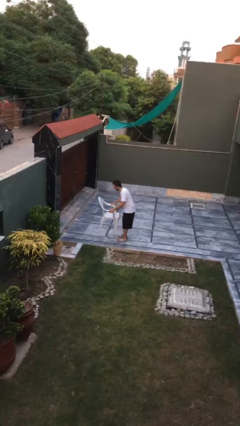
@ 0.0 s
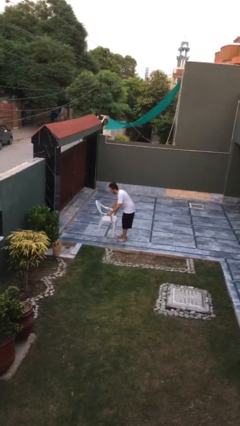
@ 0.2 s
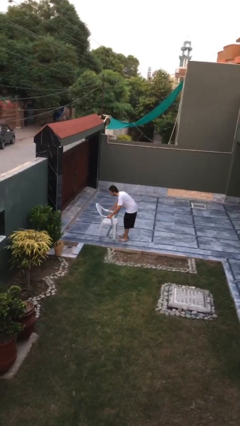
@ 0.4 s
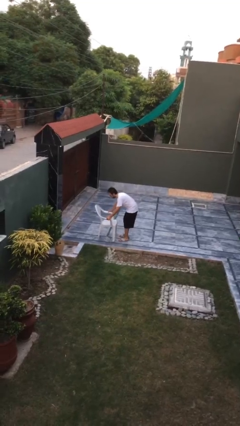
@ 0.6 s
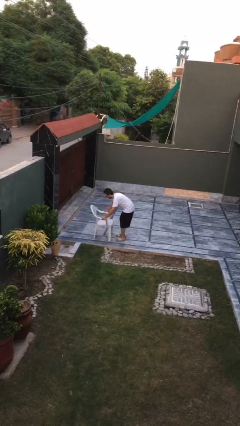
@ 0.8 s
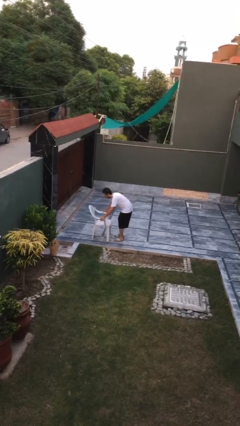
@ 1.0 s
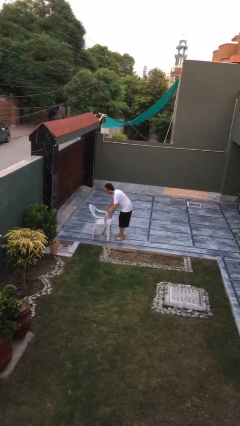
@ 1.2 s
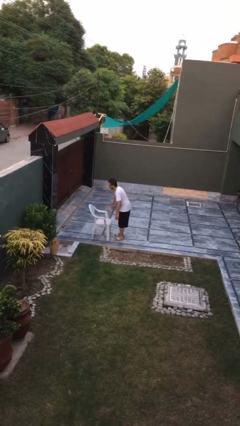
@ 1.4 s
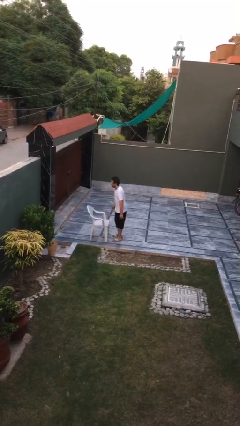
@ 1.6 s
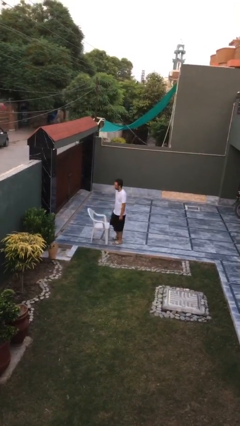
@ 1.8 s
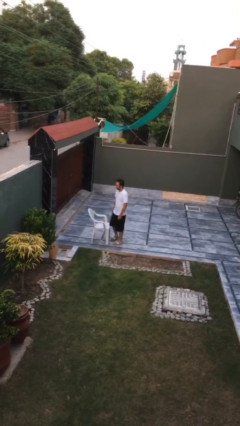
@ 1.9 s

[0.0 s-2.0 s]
person puts down object on floor

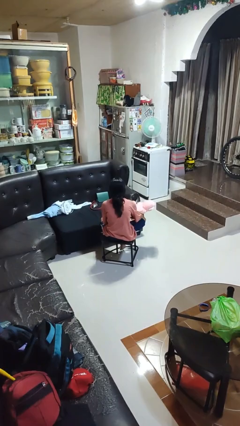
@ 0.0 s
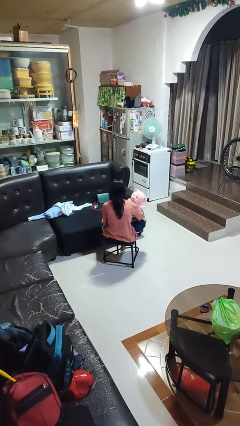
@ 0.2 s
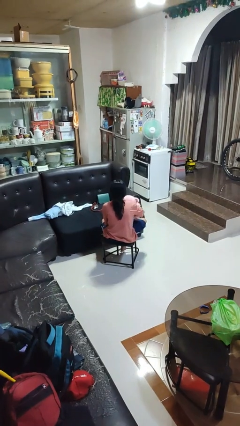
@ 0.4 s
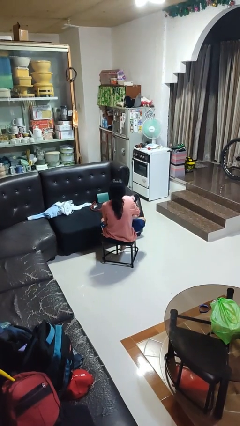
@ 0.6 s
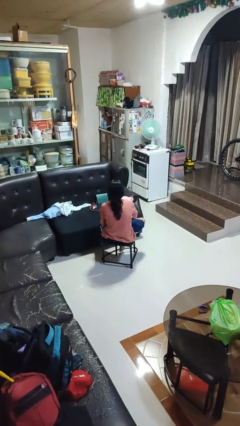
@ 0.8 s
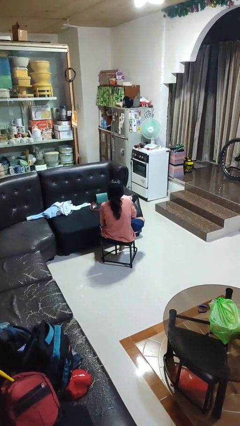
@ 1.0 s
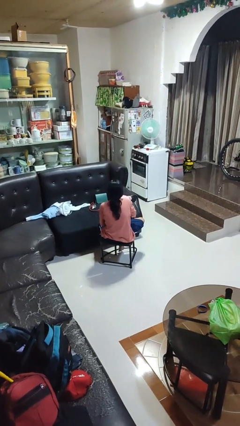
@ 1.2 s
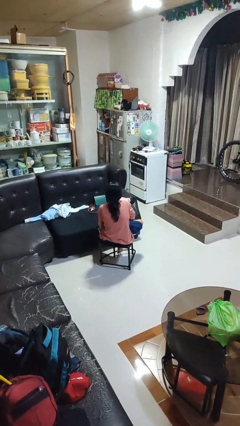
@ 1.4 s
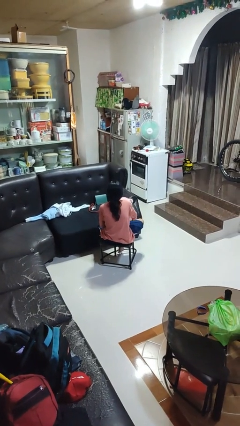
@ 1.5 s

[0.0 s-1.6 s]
person hugs stuffed animal

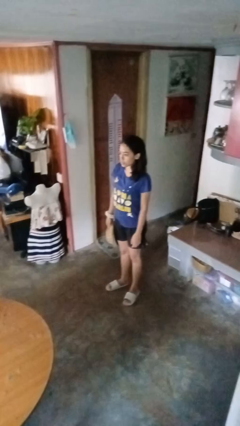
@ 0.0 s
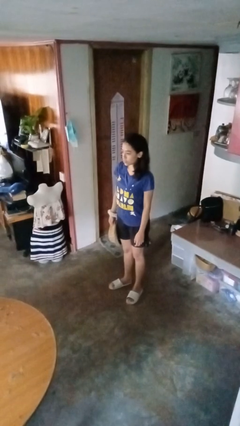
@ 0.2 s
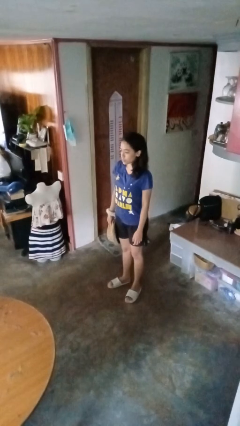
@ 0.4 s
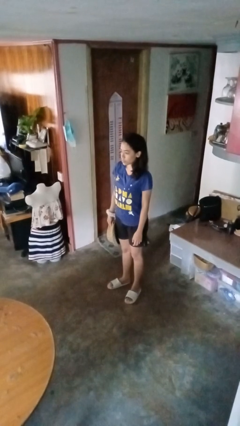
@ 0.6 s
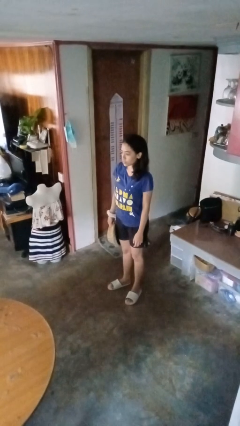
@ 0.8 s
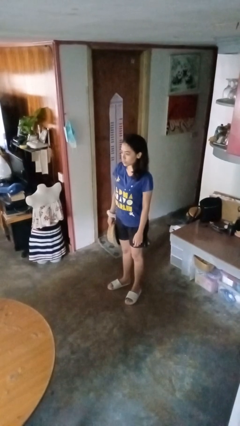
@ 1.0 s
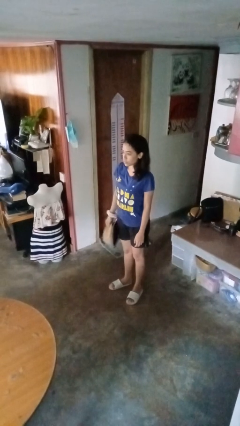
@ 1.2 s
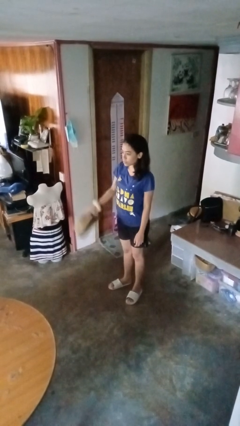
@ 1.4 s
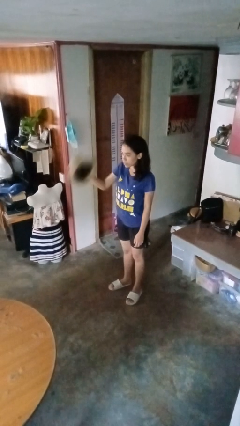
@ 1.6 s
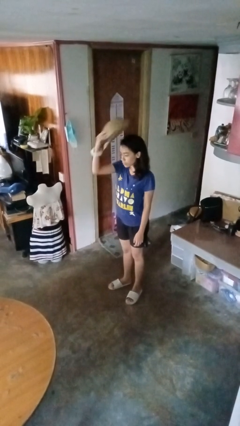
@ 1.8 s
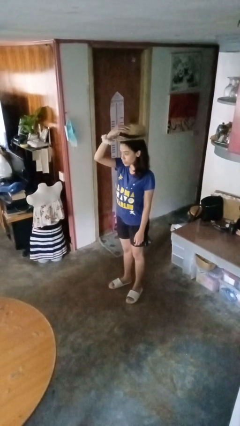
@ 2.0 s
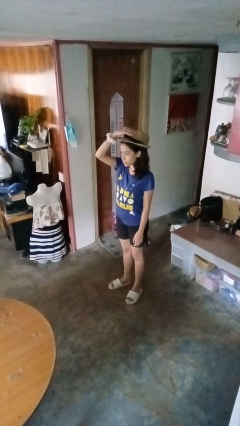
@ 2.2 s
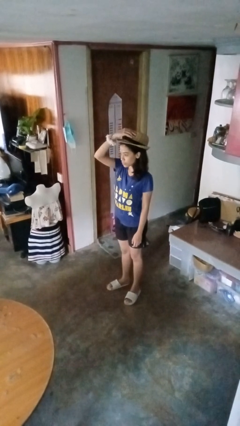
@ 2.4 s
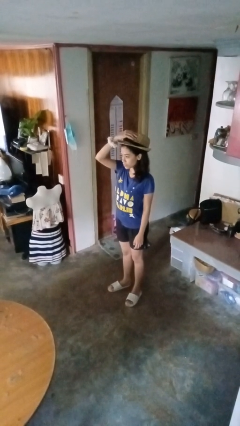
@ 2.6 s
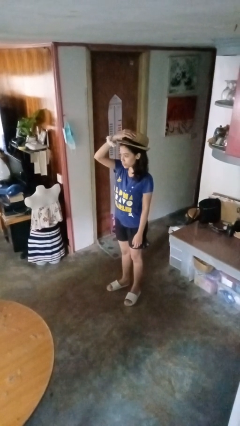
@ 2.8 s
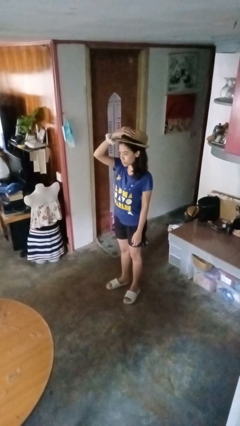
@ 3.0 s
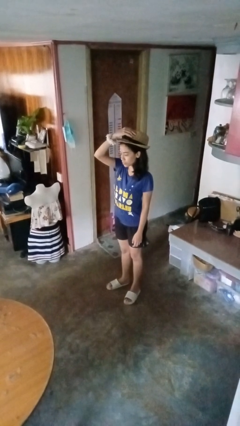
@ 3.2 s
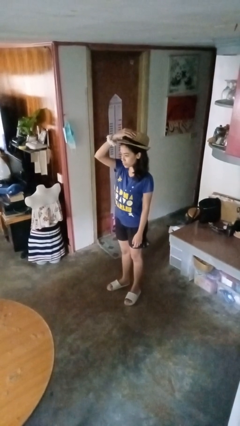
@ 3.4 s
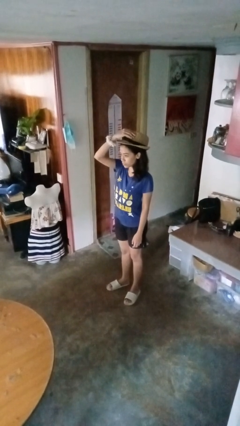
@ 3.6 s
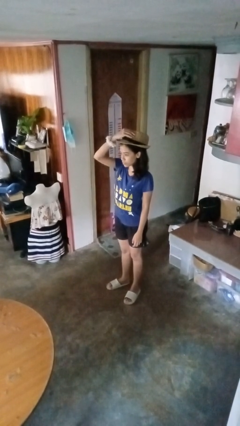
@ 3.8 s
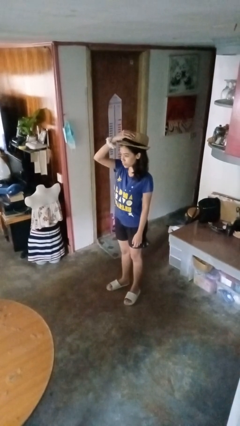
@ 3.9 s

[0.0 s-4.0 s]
person puts on hat

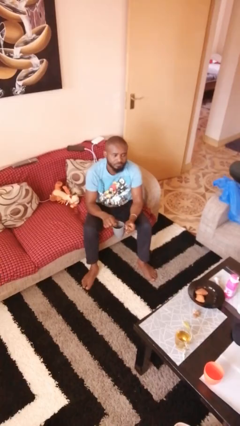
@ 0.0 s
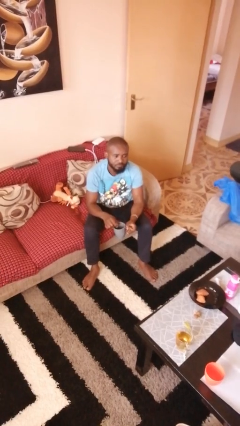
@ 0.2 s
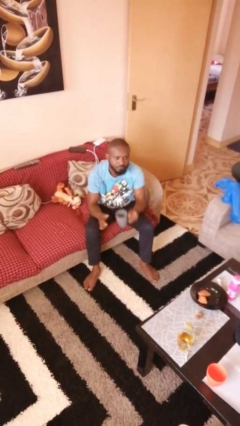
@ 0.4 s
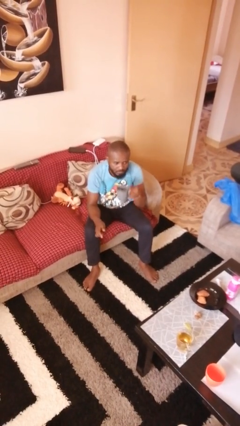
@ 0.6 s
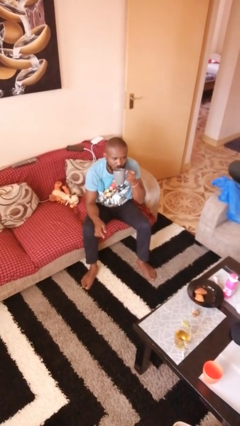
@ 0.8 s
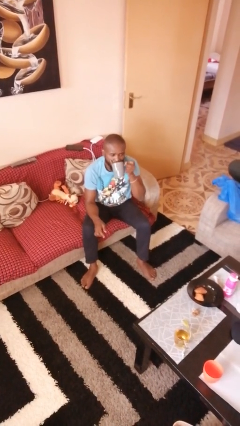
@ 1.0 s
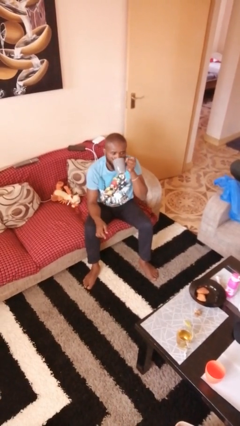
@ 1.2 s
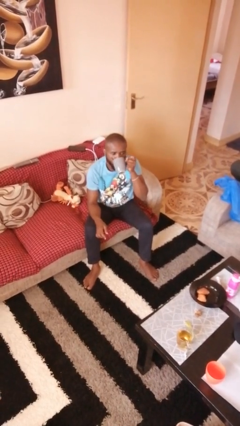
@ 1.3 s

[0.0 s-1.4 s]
person drinks from mug

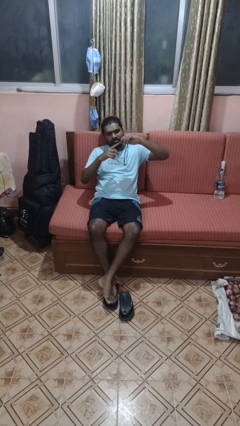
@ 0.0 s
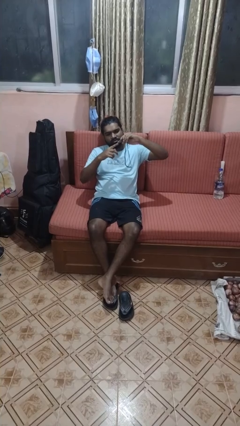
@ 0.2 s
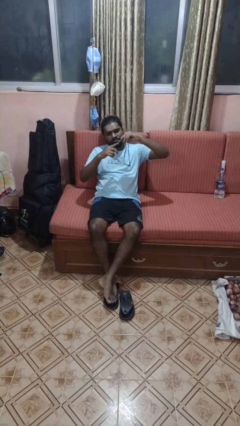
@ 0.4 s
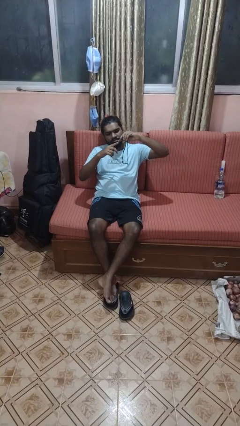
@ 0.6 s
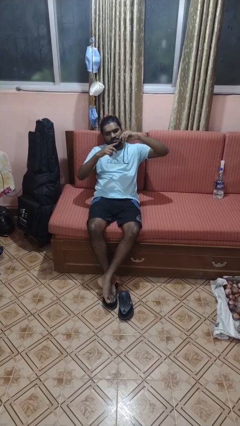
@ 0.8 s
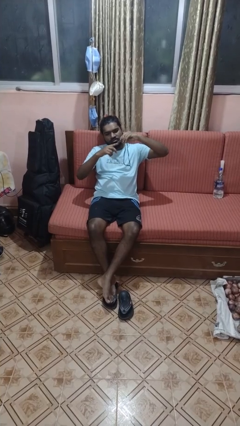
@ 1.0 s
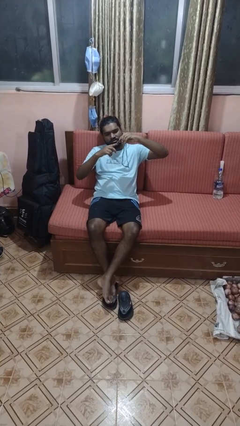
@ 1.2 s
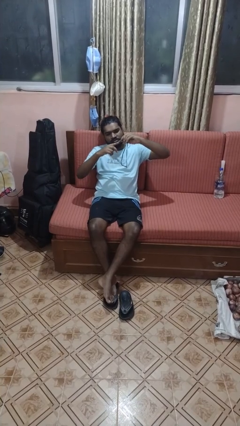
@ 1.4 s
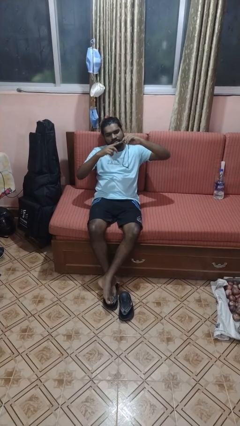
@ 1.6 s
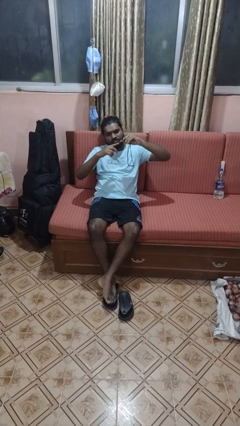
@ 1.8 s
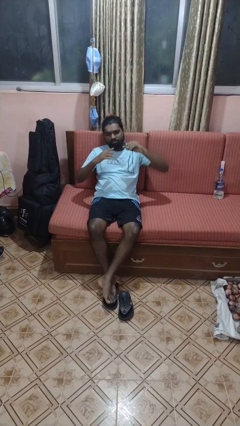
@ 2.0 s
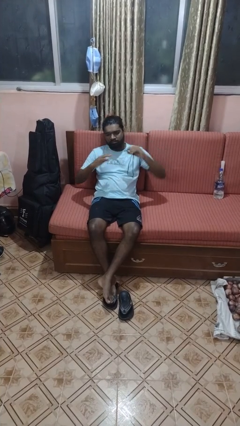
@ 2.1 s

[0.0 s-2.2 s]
person clips fingernails

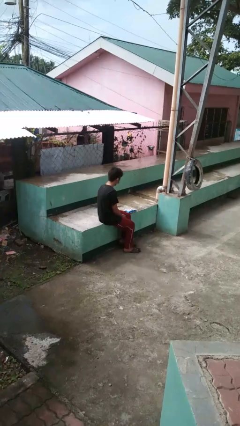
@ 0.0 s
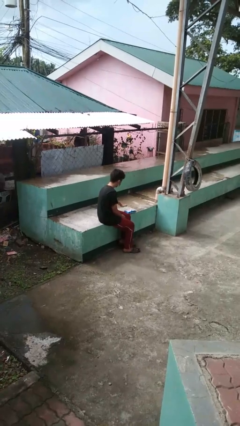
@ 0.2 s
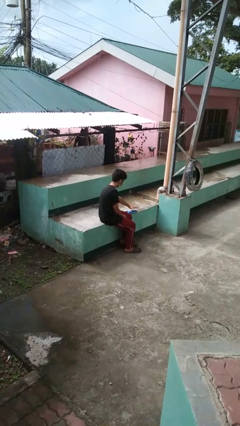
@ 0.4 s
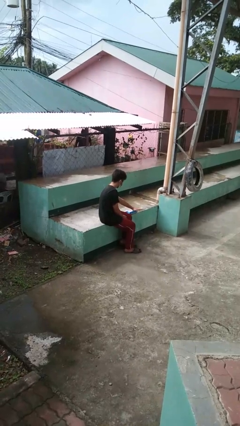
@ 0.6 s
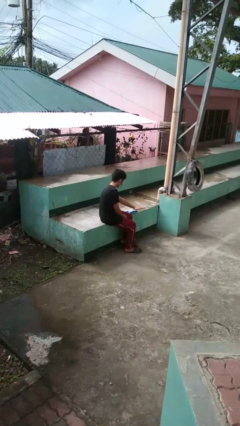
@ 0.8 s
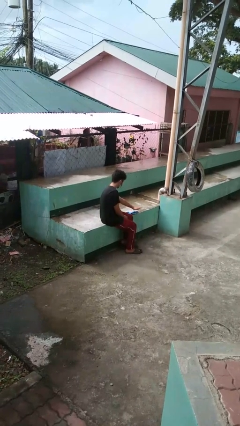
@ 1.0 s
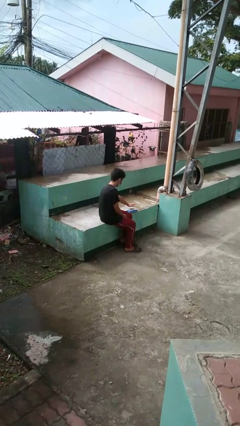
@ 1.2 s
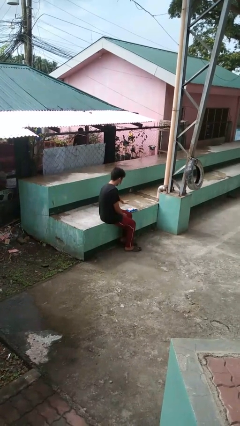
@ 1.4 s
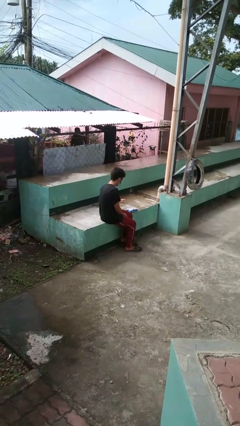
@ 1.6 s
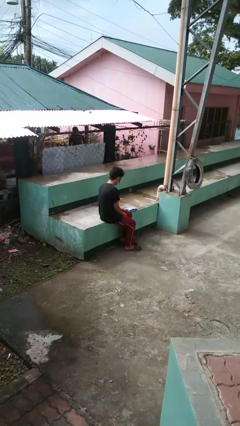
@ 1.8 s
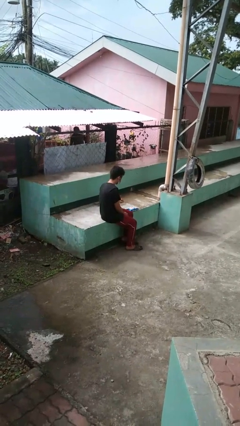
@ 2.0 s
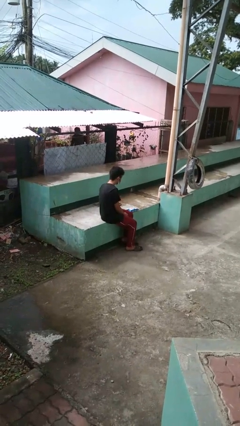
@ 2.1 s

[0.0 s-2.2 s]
person waves hand over object

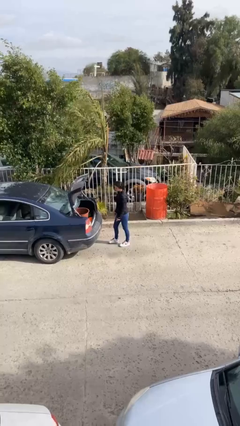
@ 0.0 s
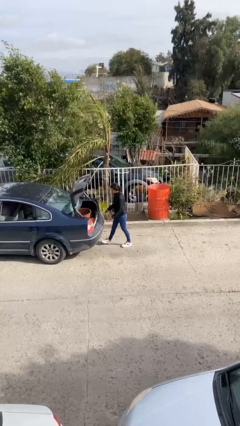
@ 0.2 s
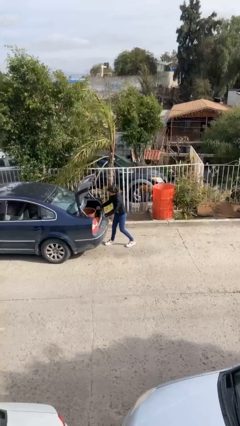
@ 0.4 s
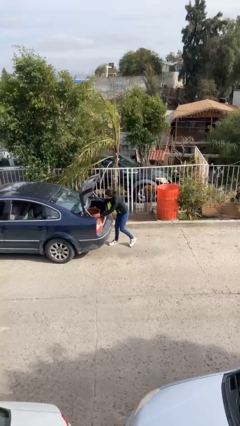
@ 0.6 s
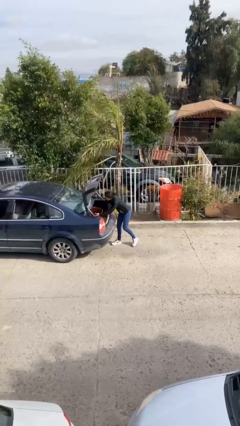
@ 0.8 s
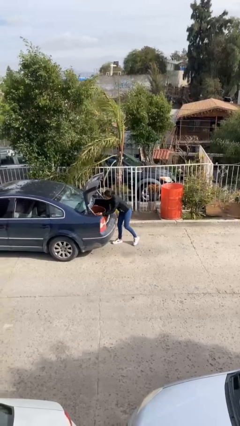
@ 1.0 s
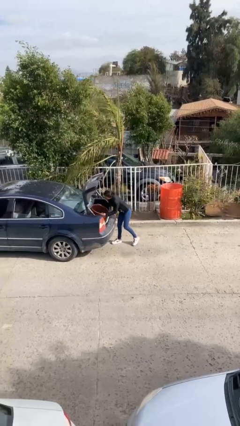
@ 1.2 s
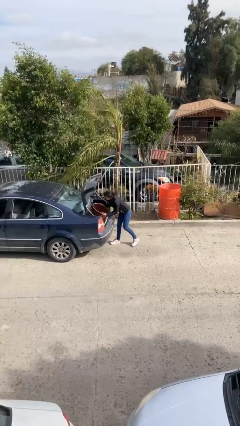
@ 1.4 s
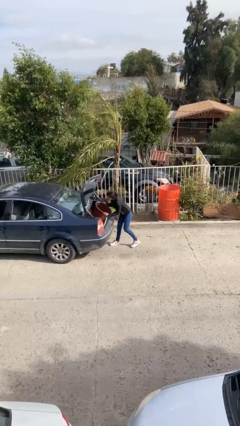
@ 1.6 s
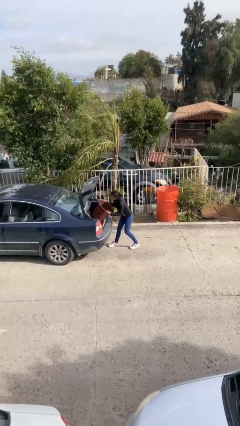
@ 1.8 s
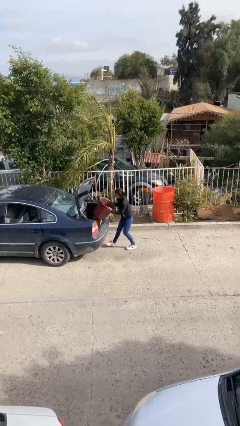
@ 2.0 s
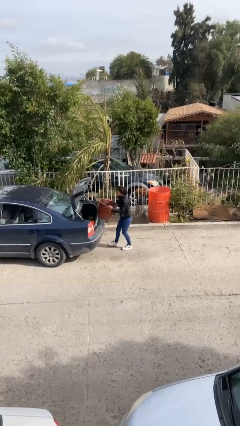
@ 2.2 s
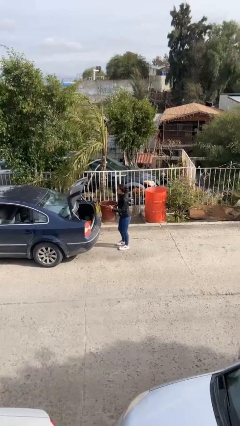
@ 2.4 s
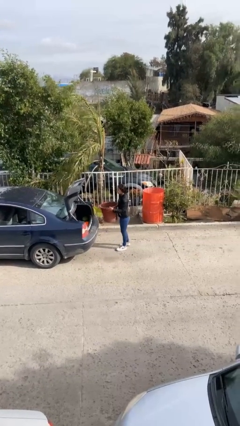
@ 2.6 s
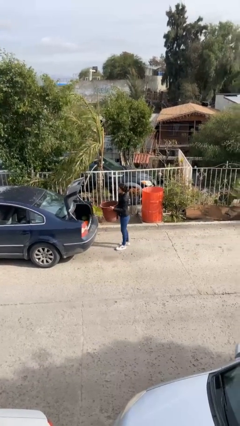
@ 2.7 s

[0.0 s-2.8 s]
person unloads car

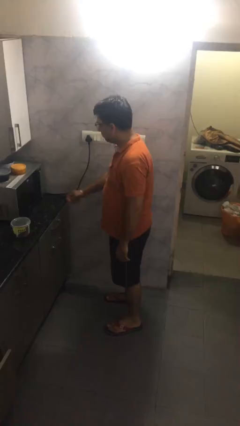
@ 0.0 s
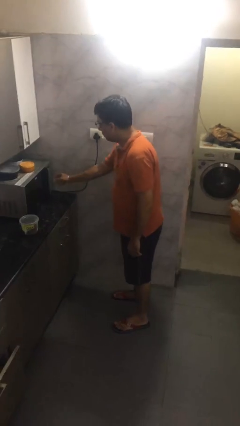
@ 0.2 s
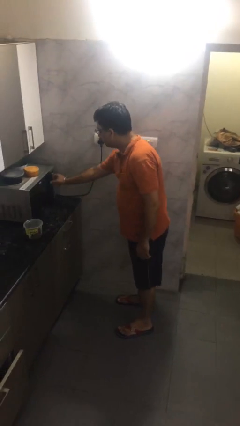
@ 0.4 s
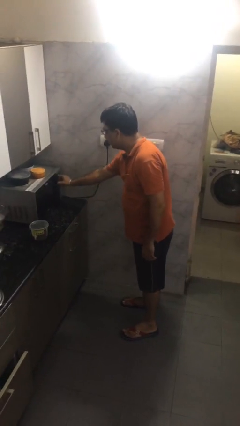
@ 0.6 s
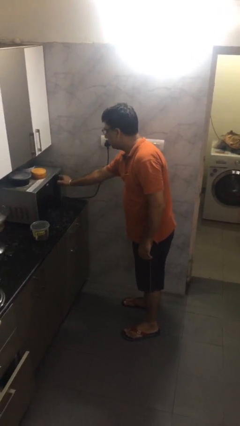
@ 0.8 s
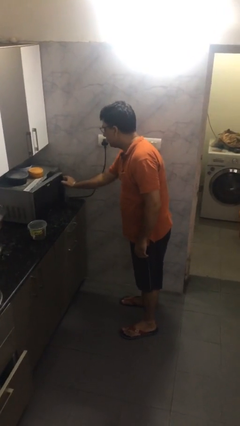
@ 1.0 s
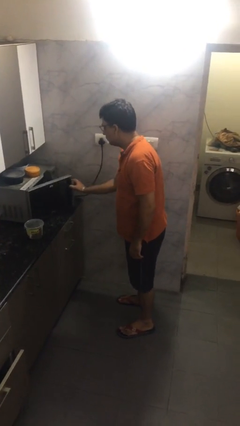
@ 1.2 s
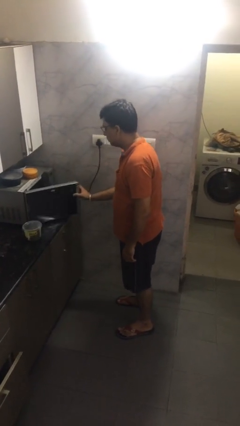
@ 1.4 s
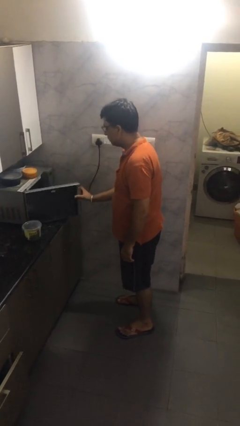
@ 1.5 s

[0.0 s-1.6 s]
person opens microwave
